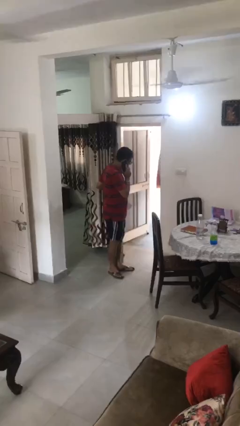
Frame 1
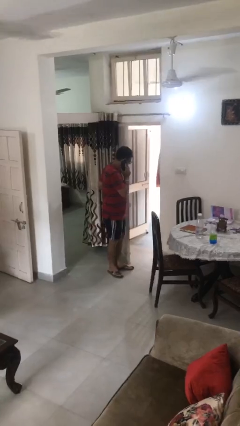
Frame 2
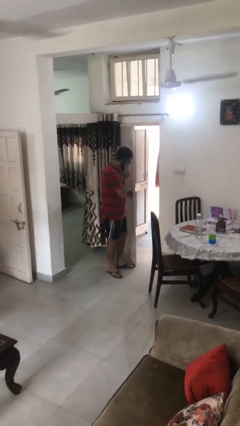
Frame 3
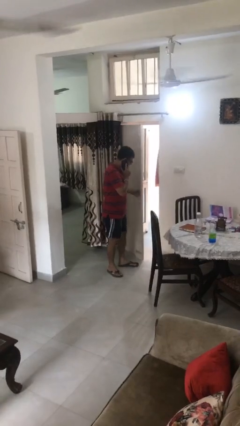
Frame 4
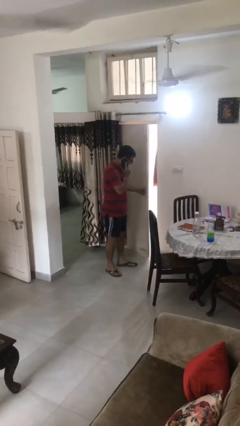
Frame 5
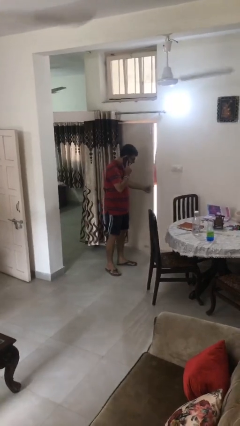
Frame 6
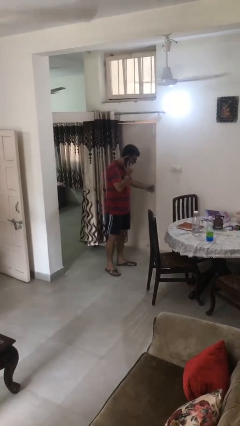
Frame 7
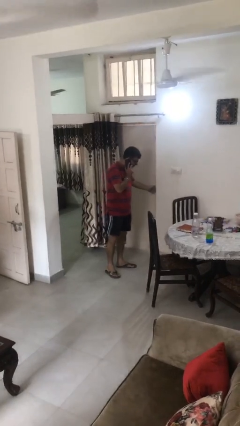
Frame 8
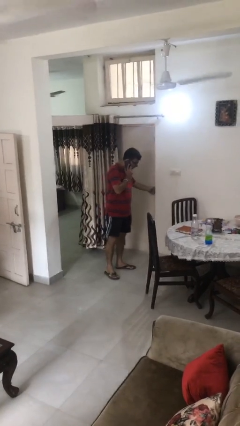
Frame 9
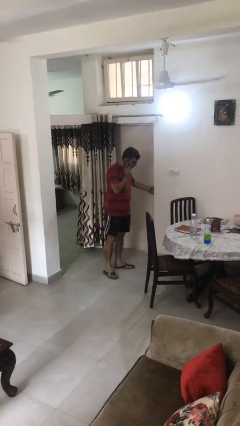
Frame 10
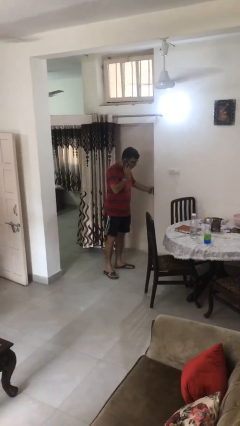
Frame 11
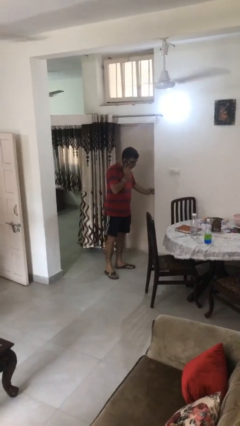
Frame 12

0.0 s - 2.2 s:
person closes facility door

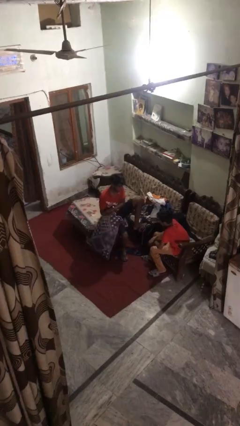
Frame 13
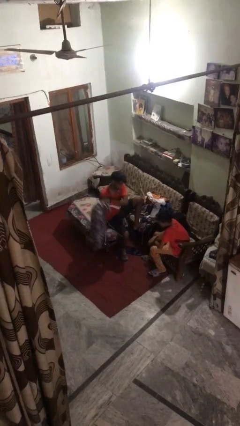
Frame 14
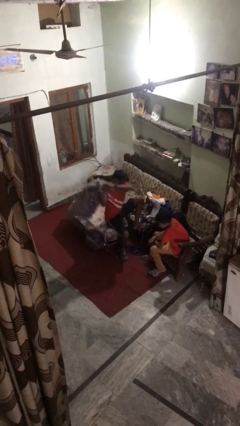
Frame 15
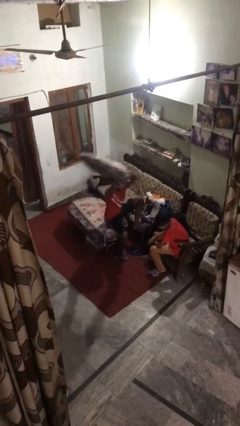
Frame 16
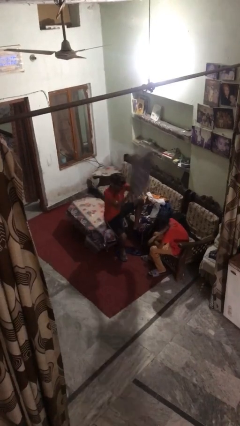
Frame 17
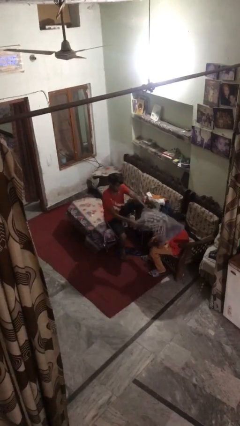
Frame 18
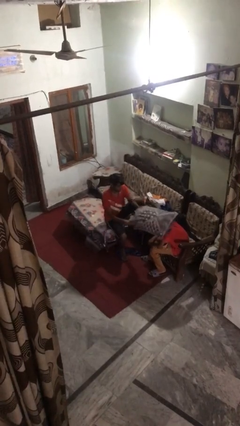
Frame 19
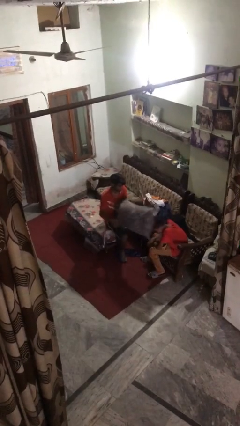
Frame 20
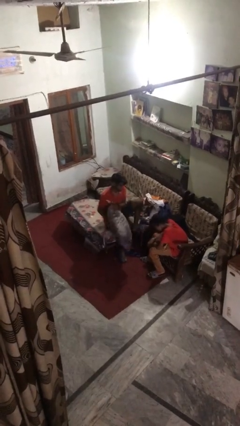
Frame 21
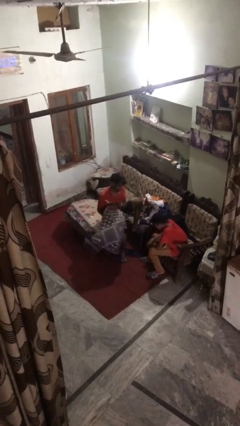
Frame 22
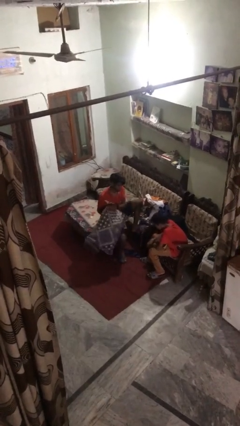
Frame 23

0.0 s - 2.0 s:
person hits person with pillow

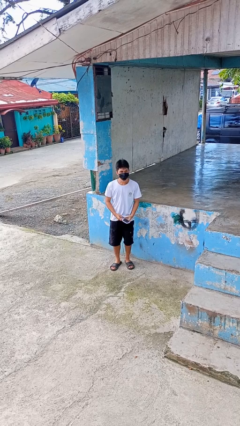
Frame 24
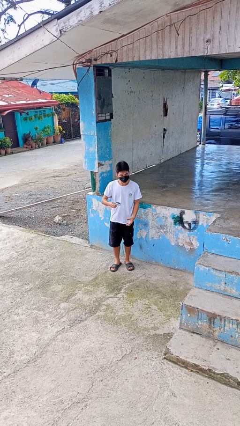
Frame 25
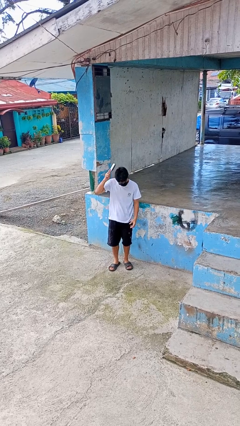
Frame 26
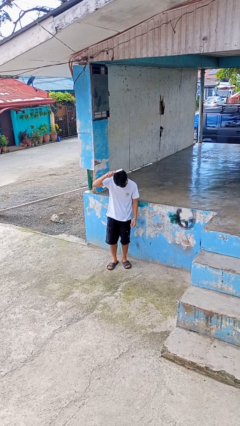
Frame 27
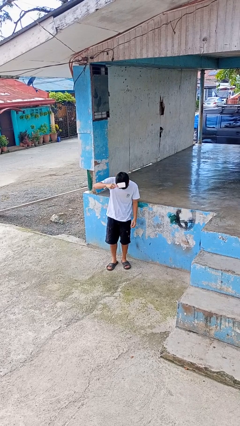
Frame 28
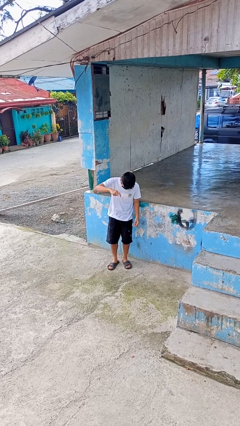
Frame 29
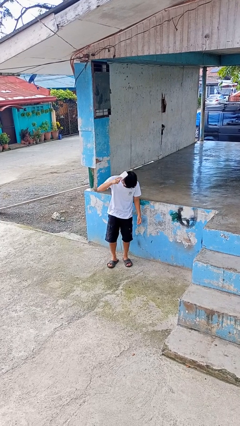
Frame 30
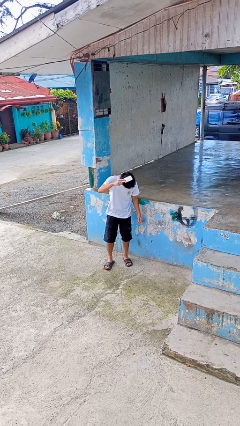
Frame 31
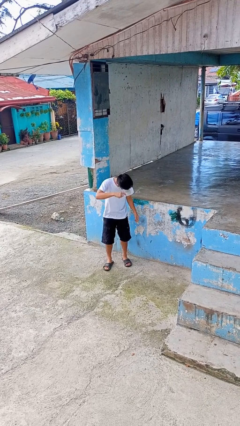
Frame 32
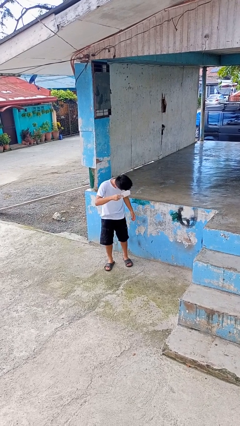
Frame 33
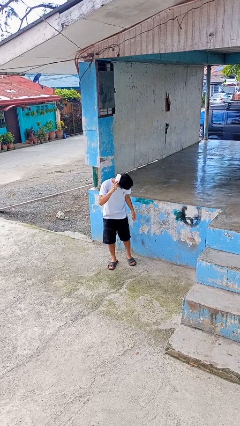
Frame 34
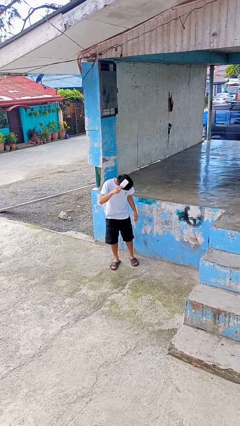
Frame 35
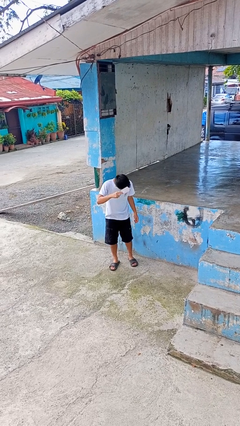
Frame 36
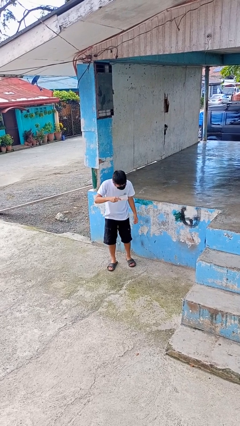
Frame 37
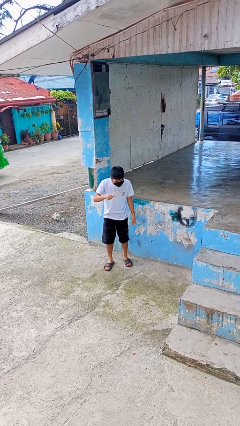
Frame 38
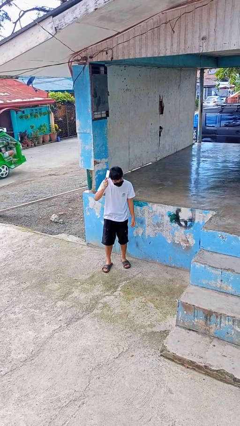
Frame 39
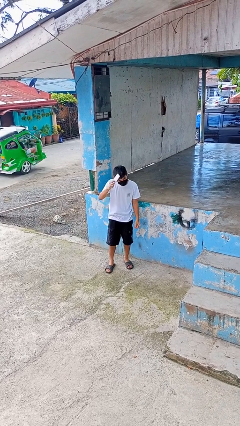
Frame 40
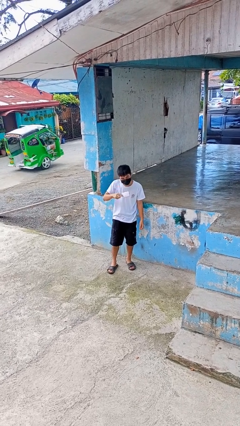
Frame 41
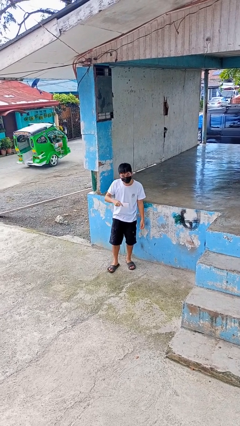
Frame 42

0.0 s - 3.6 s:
person brushes hair

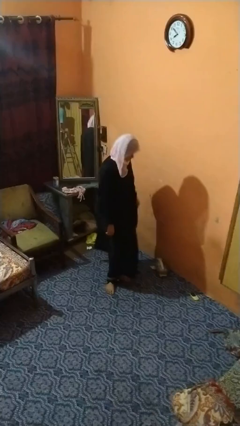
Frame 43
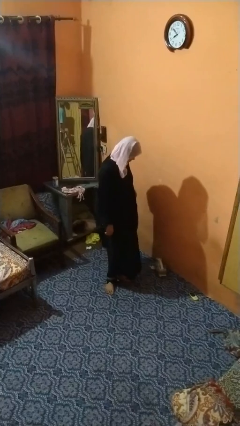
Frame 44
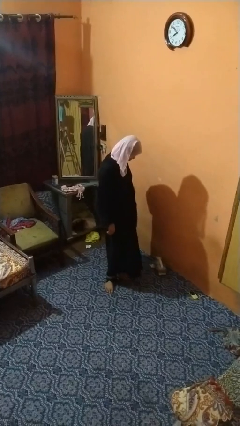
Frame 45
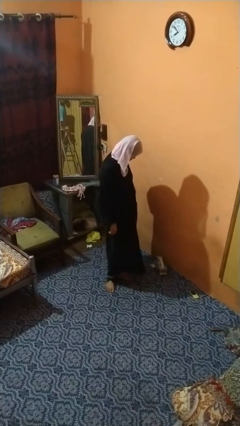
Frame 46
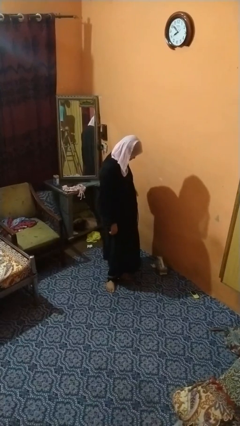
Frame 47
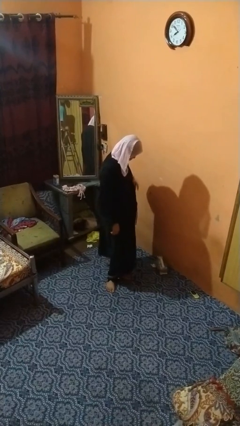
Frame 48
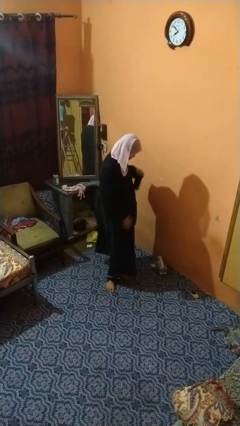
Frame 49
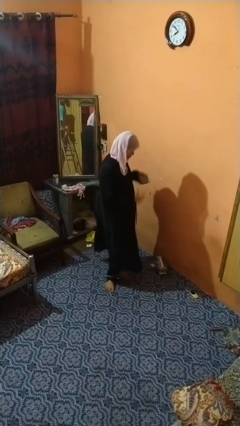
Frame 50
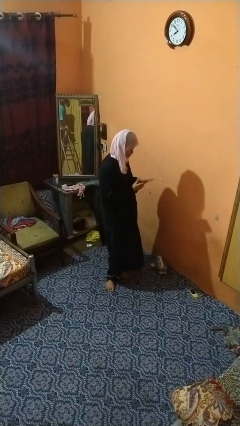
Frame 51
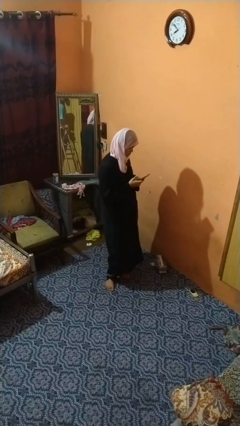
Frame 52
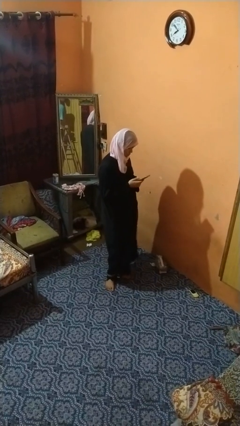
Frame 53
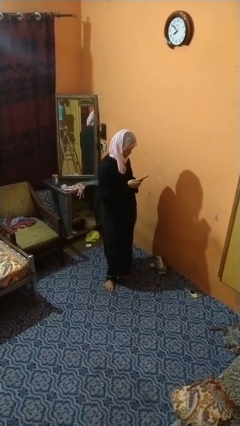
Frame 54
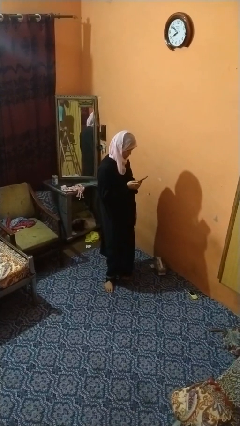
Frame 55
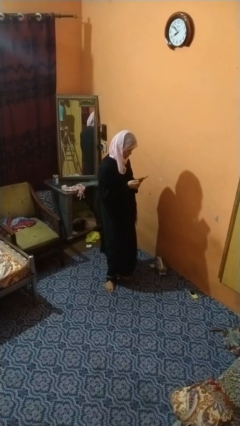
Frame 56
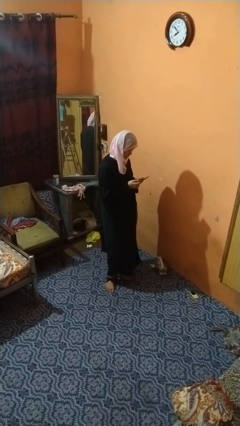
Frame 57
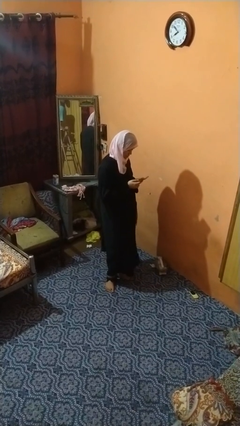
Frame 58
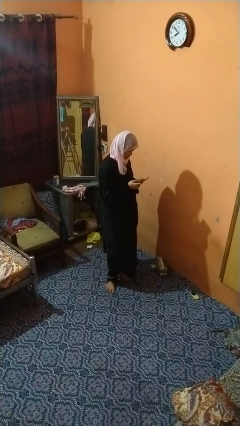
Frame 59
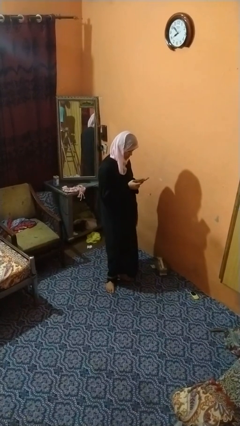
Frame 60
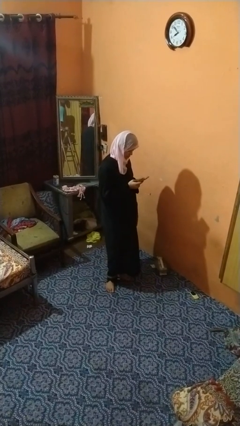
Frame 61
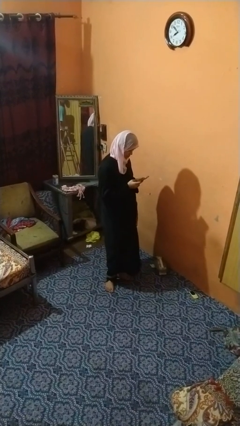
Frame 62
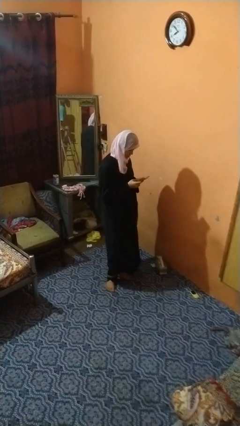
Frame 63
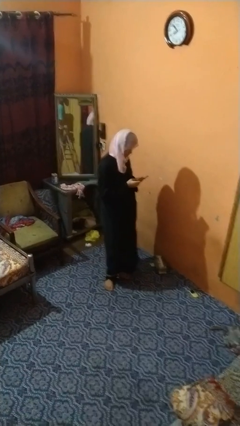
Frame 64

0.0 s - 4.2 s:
person takes phone from pocket

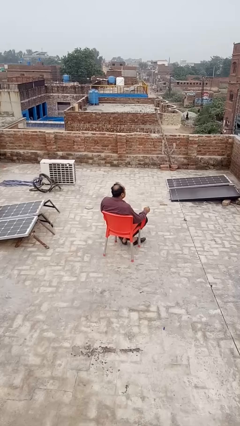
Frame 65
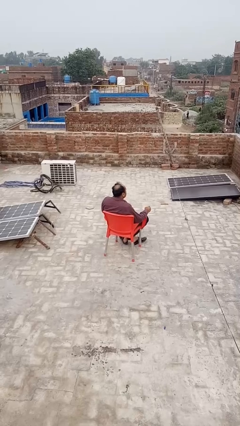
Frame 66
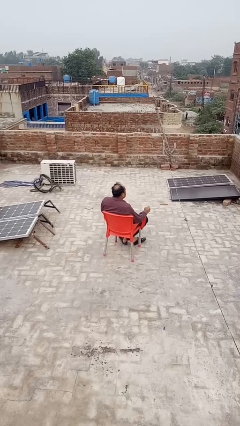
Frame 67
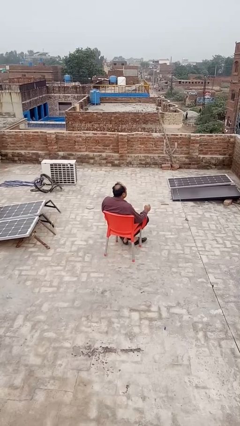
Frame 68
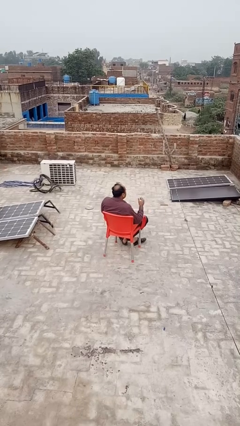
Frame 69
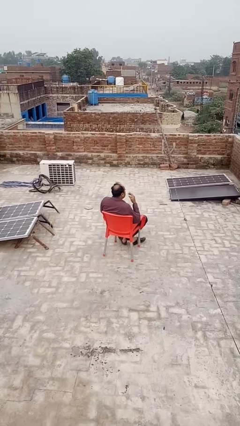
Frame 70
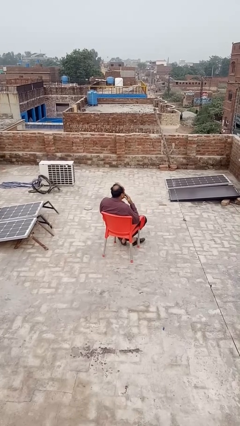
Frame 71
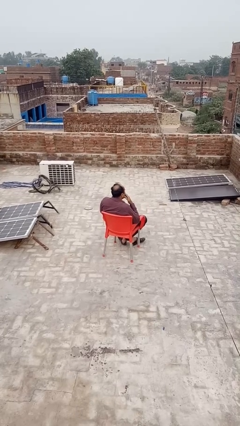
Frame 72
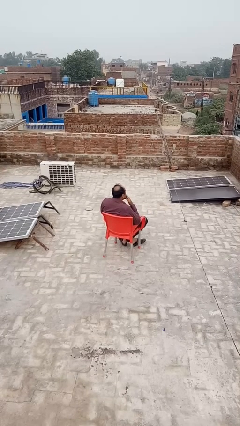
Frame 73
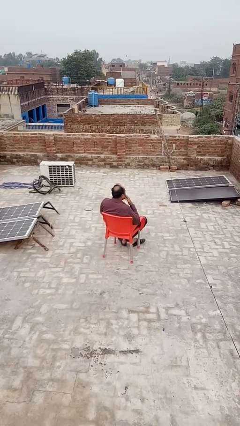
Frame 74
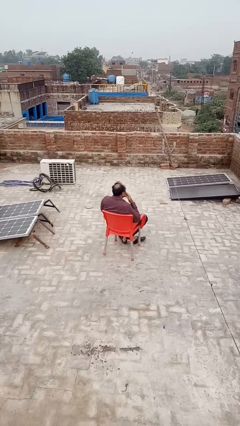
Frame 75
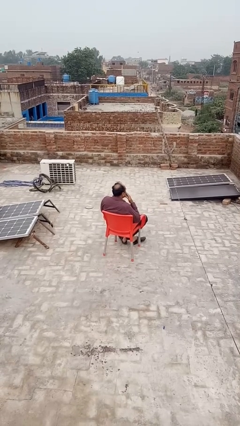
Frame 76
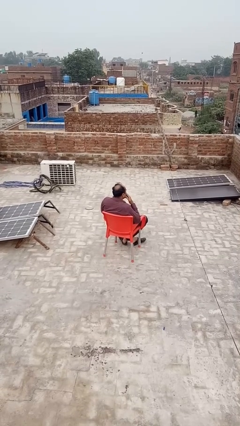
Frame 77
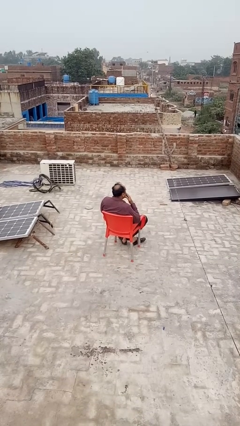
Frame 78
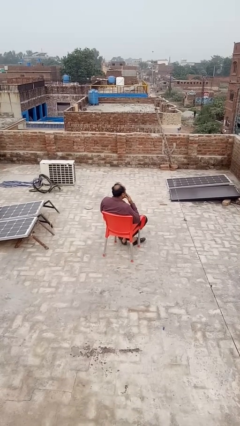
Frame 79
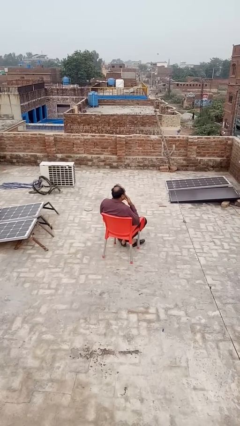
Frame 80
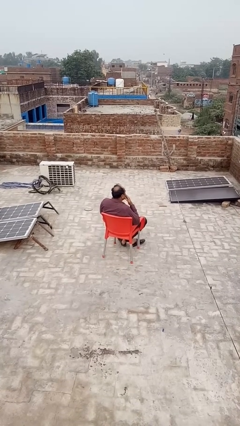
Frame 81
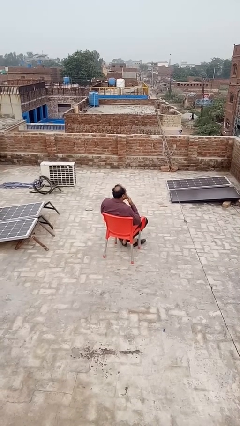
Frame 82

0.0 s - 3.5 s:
person vapes

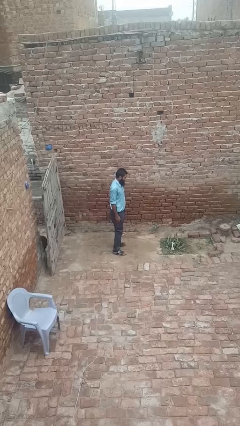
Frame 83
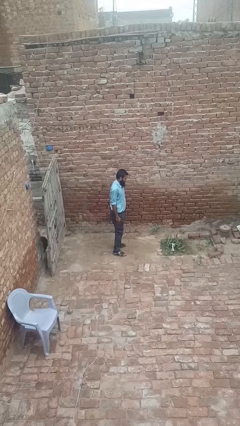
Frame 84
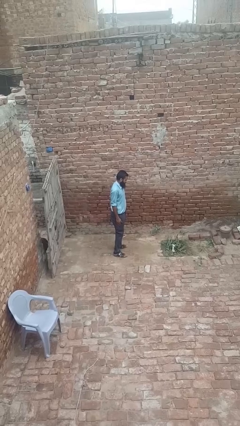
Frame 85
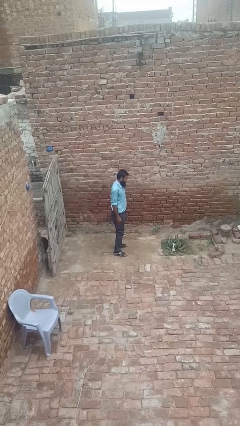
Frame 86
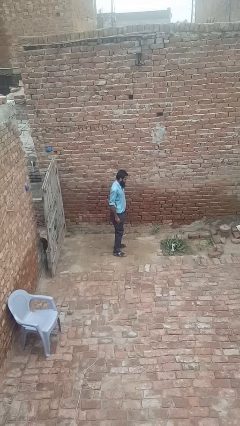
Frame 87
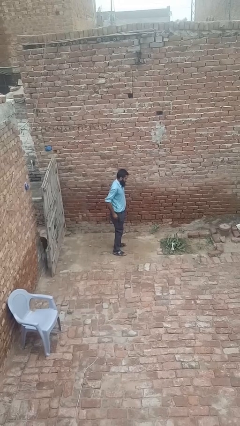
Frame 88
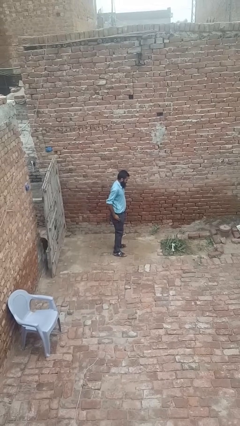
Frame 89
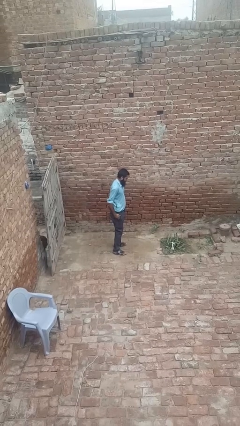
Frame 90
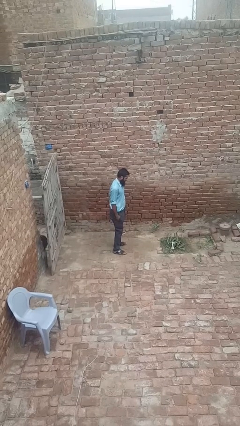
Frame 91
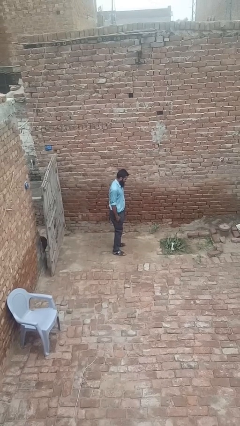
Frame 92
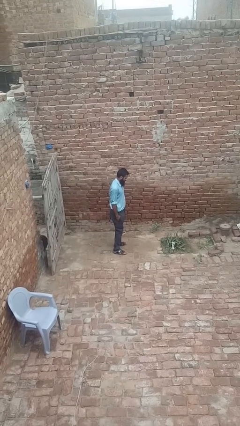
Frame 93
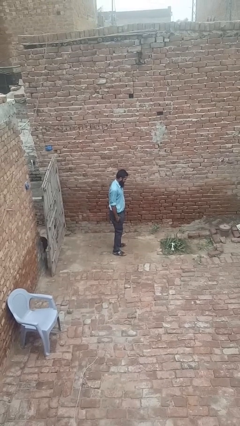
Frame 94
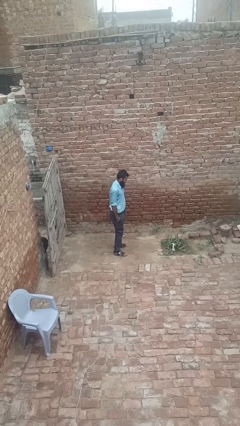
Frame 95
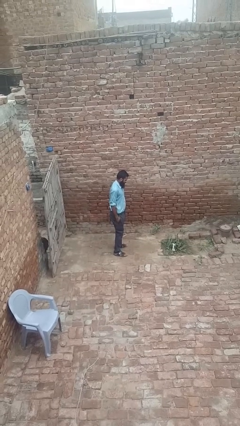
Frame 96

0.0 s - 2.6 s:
person puts hands in back pockets
